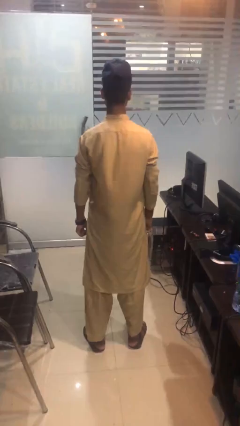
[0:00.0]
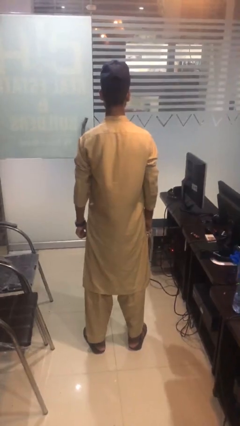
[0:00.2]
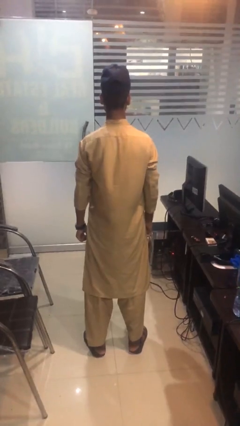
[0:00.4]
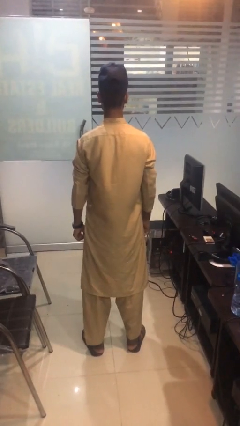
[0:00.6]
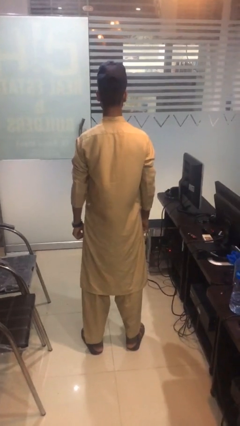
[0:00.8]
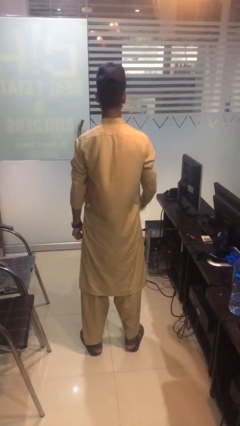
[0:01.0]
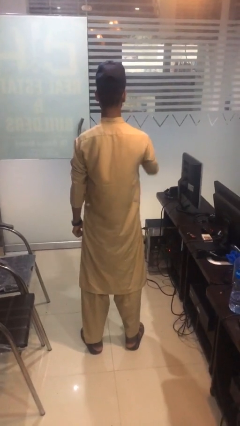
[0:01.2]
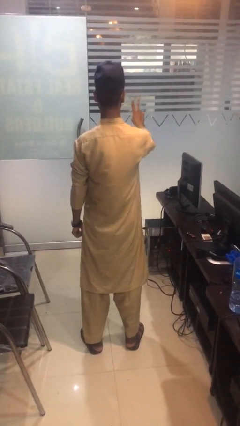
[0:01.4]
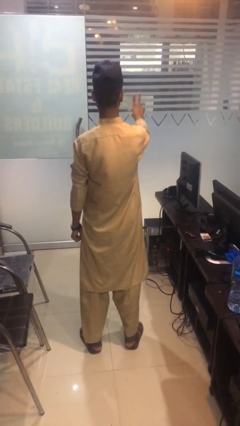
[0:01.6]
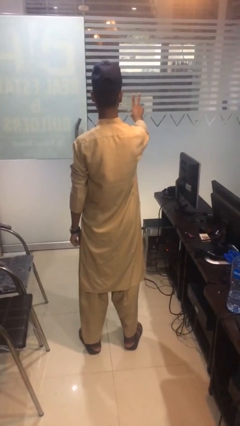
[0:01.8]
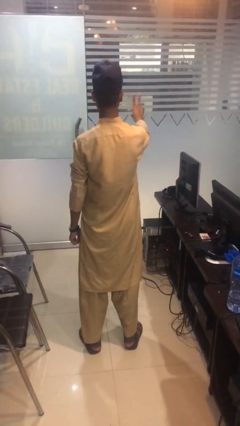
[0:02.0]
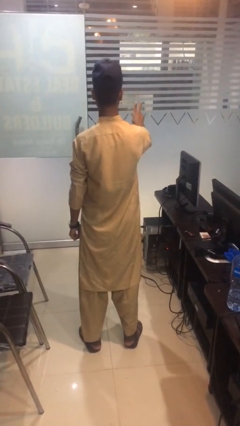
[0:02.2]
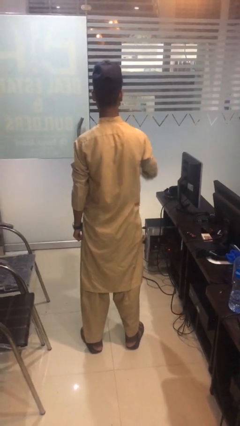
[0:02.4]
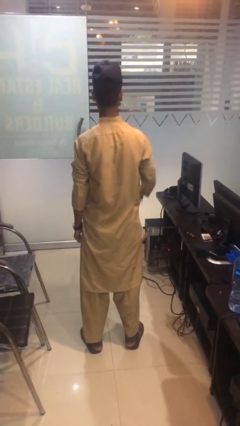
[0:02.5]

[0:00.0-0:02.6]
person gestures peace

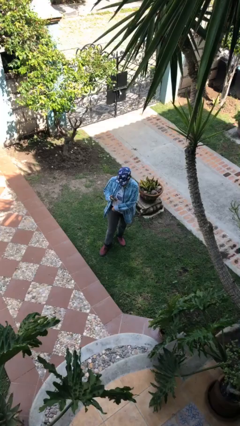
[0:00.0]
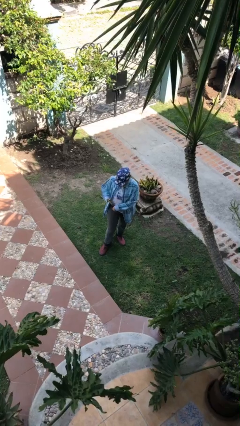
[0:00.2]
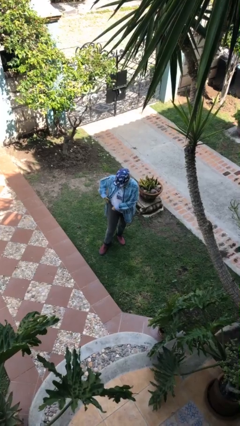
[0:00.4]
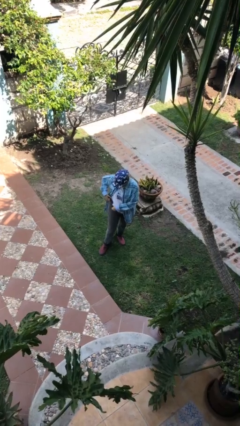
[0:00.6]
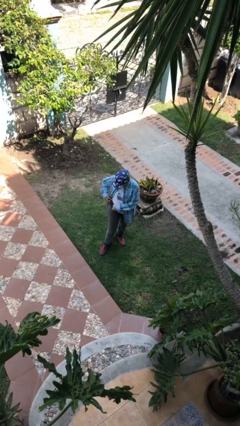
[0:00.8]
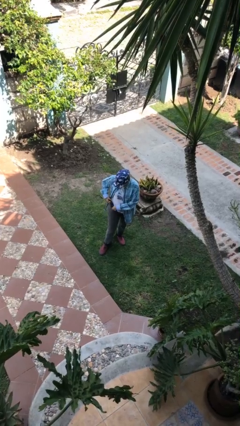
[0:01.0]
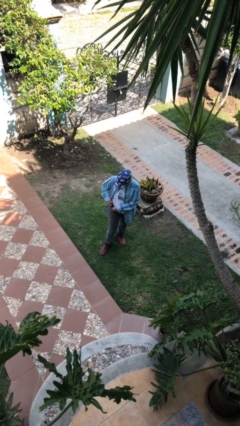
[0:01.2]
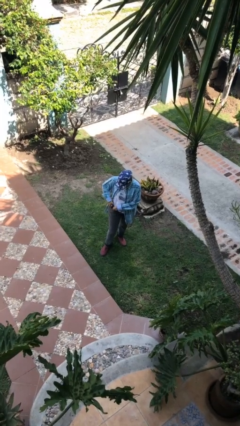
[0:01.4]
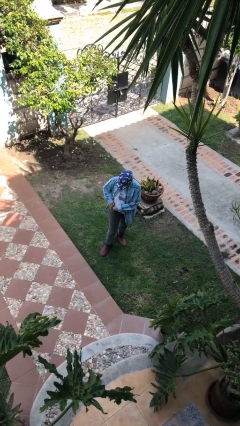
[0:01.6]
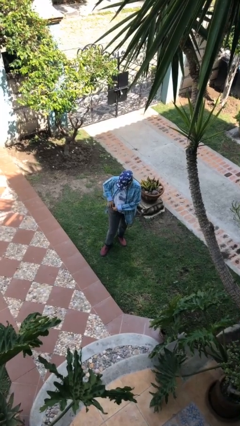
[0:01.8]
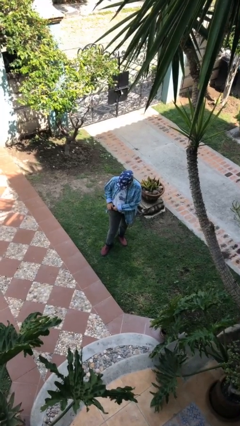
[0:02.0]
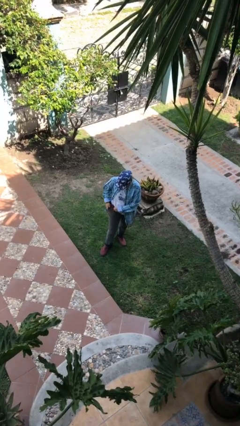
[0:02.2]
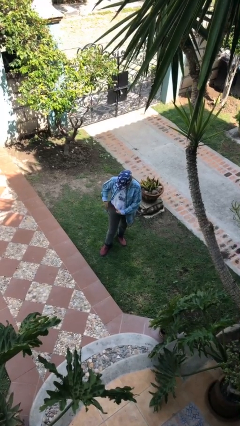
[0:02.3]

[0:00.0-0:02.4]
person puts phone into pocket

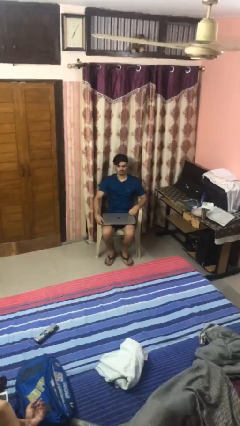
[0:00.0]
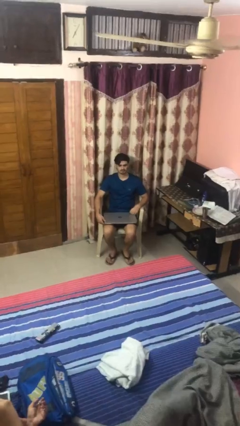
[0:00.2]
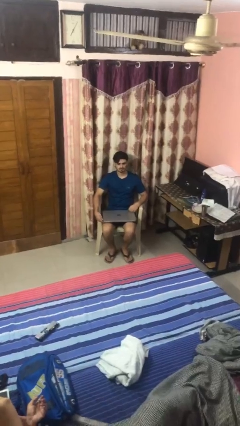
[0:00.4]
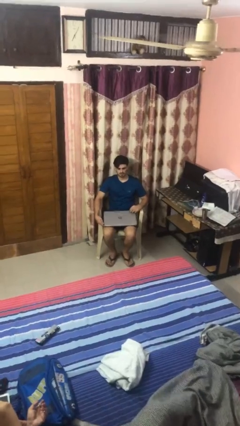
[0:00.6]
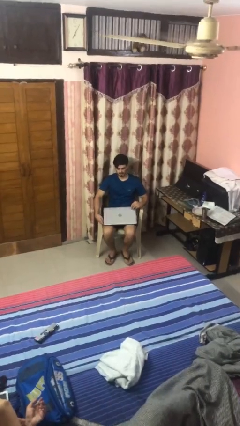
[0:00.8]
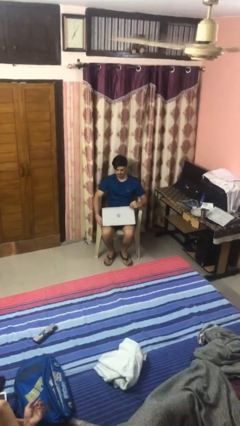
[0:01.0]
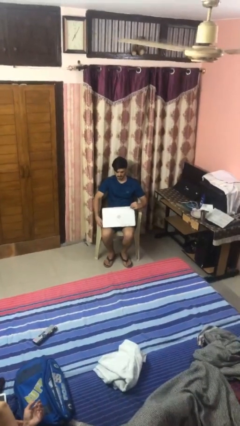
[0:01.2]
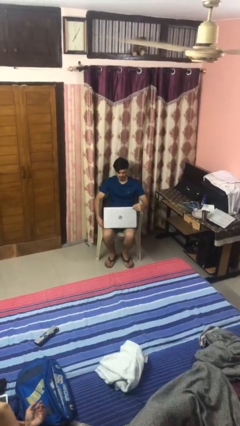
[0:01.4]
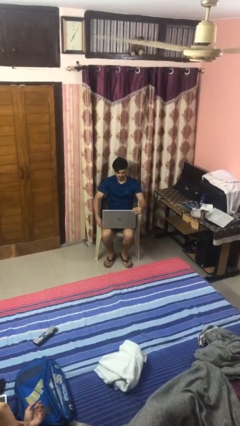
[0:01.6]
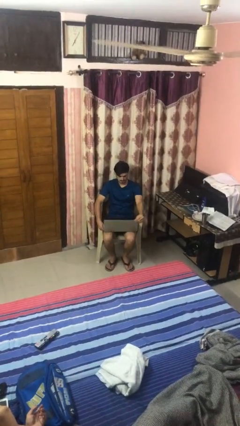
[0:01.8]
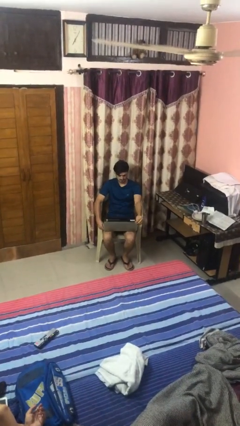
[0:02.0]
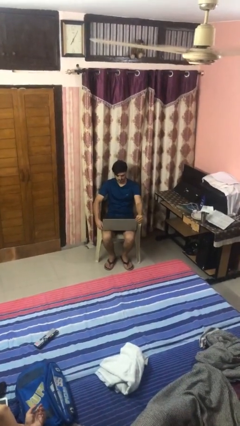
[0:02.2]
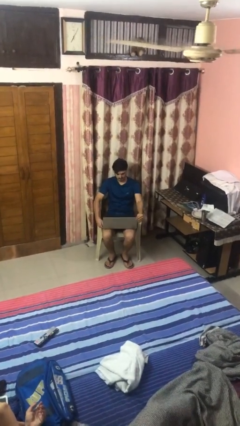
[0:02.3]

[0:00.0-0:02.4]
person opens laptop

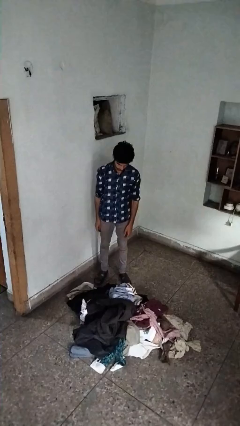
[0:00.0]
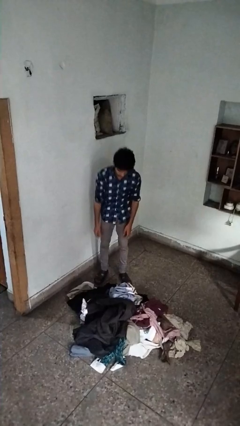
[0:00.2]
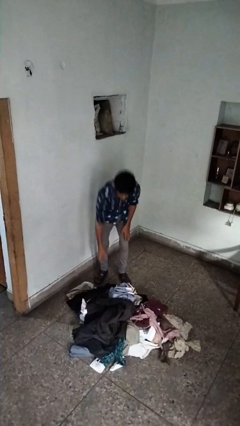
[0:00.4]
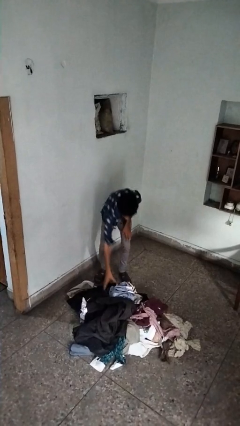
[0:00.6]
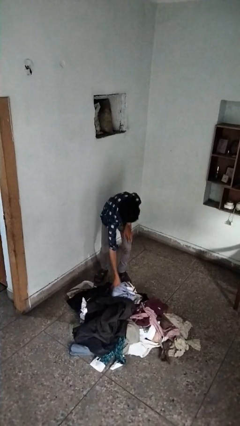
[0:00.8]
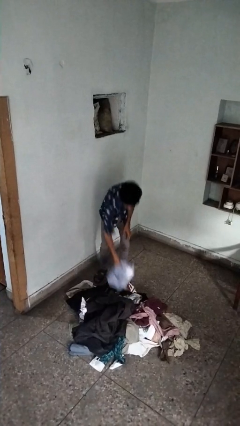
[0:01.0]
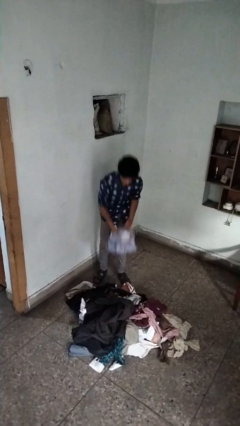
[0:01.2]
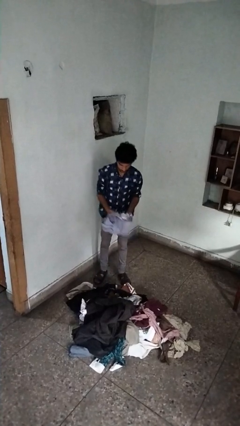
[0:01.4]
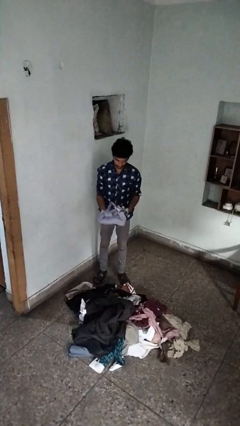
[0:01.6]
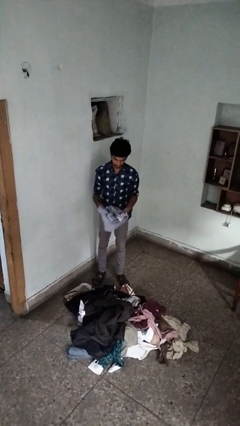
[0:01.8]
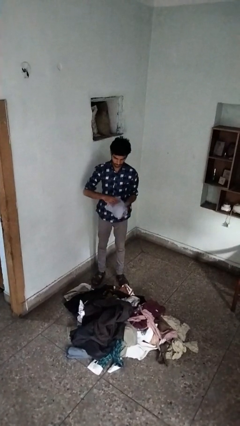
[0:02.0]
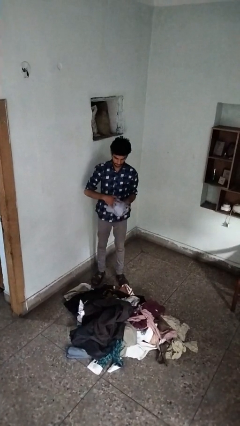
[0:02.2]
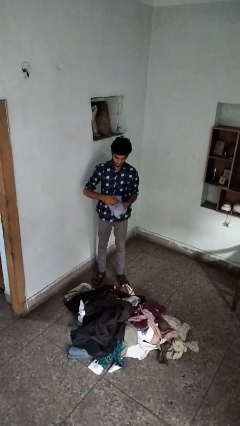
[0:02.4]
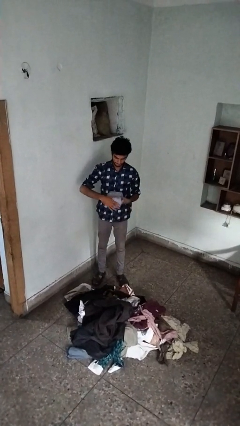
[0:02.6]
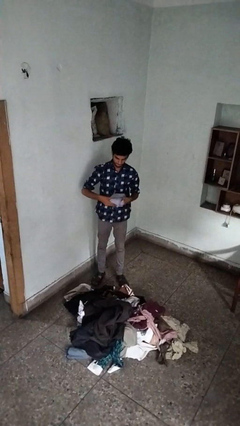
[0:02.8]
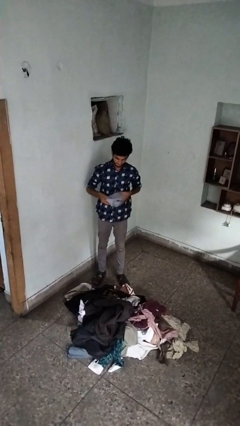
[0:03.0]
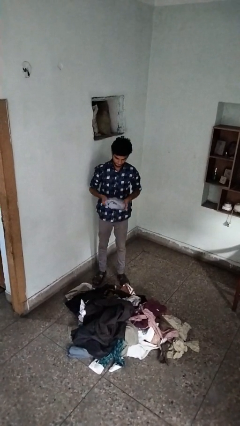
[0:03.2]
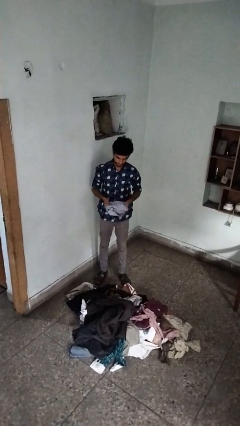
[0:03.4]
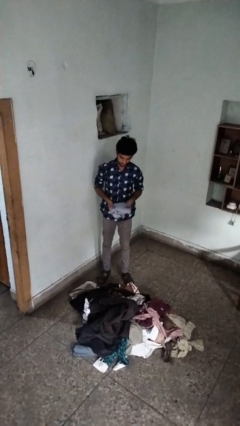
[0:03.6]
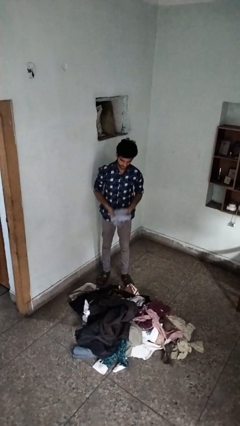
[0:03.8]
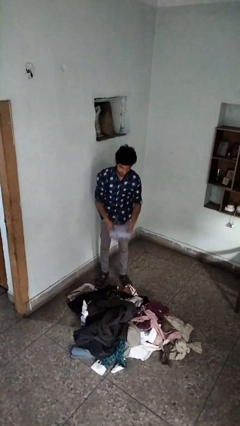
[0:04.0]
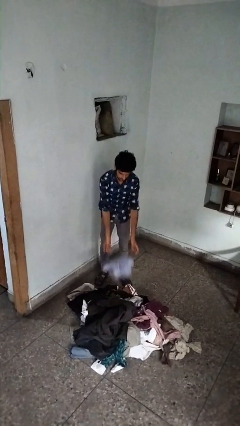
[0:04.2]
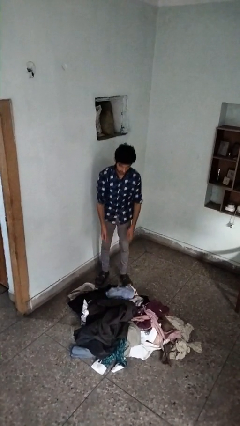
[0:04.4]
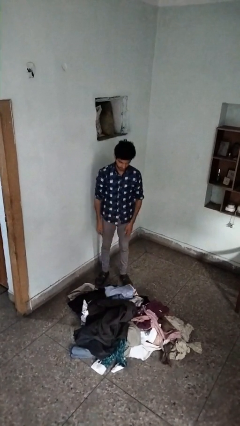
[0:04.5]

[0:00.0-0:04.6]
person folds shirt

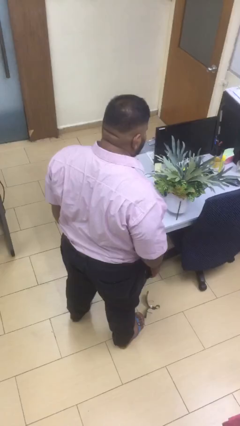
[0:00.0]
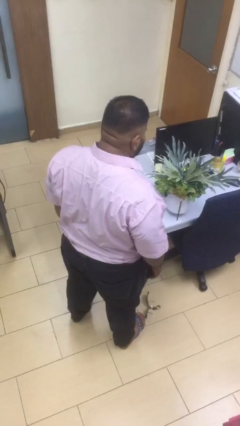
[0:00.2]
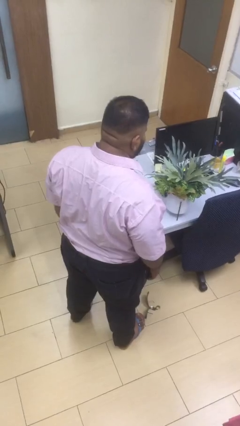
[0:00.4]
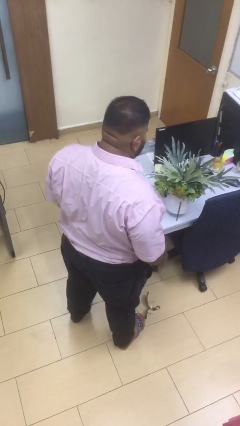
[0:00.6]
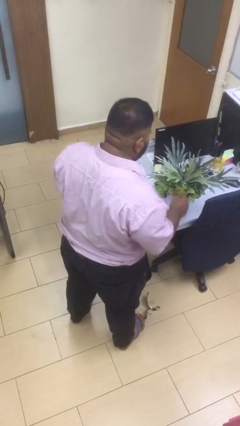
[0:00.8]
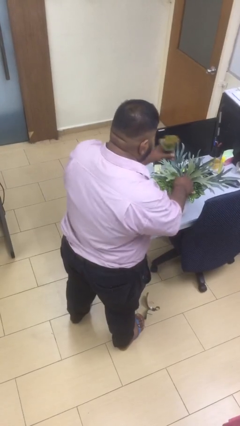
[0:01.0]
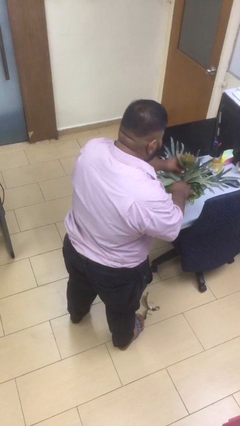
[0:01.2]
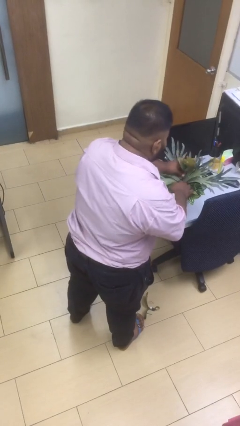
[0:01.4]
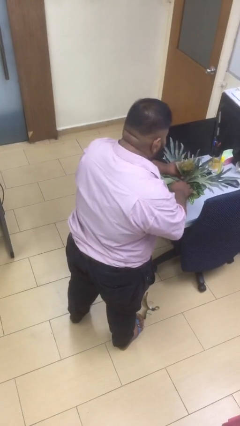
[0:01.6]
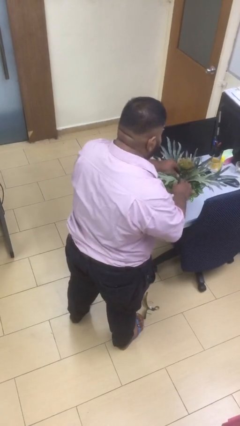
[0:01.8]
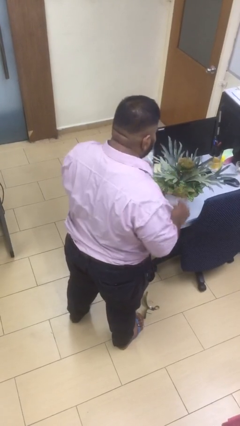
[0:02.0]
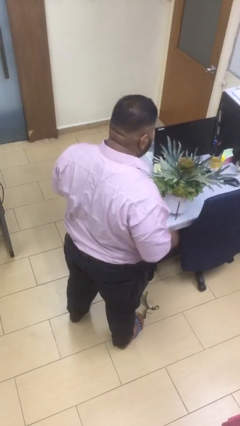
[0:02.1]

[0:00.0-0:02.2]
person arranges flowers in vase

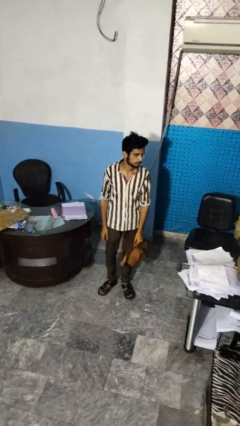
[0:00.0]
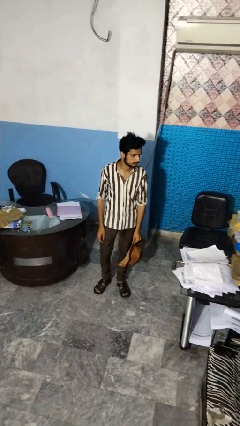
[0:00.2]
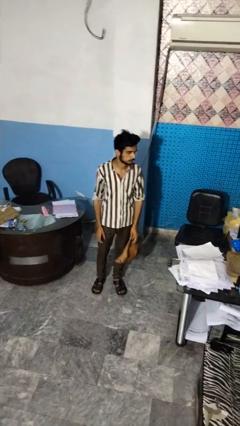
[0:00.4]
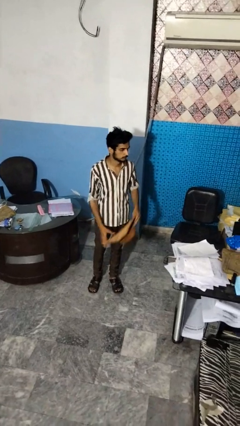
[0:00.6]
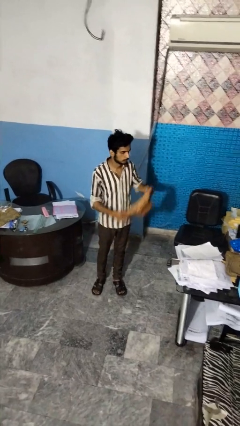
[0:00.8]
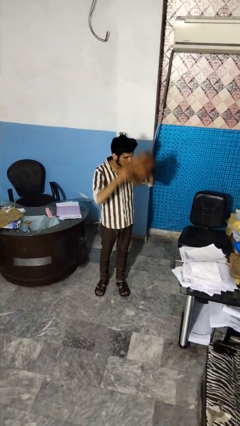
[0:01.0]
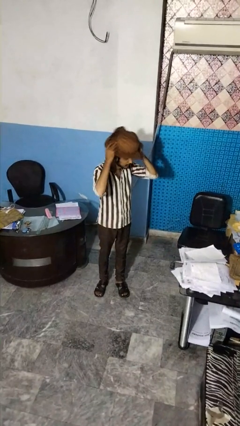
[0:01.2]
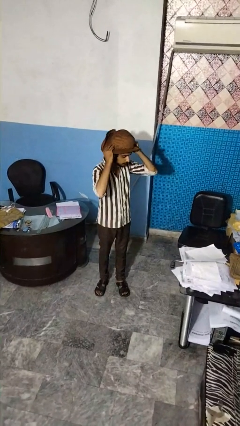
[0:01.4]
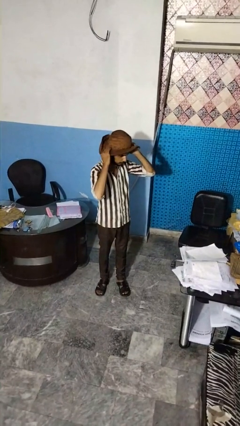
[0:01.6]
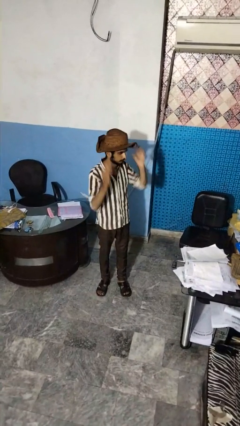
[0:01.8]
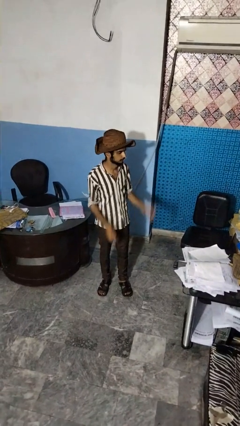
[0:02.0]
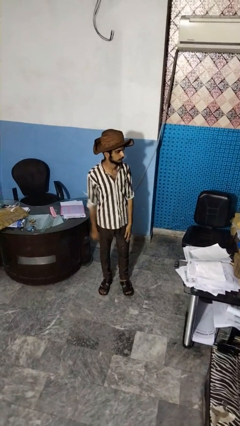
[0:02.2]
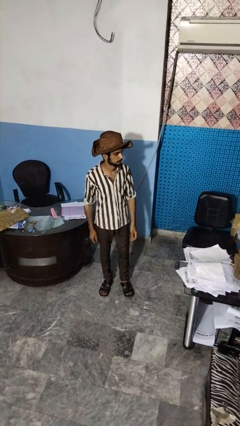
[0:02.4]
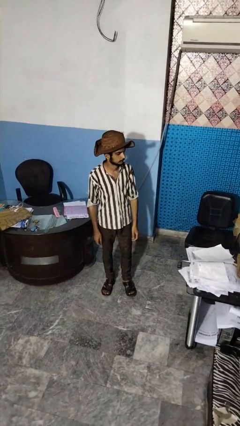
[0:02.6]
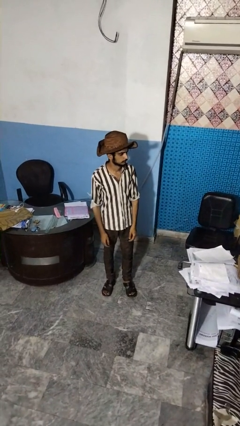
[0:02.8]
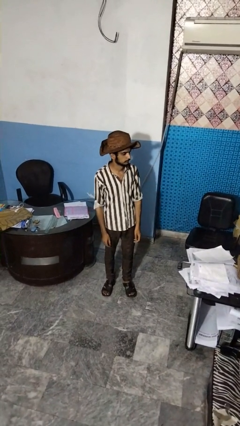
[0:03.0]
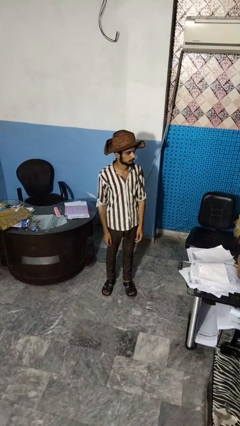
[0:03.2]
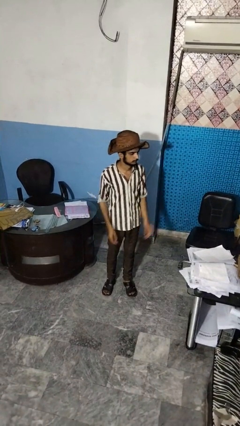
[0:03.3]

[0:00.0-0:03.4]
person puts on hat
